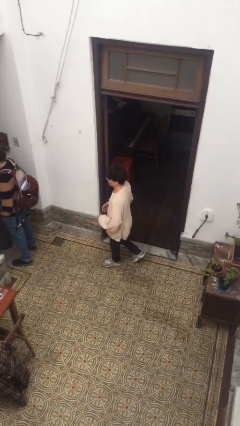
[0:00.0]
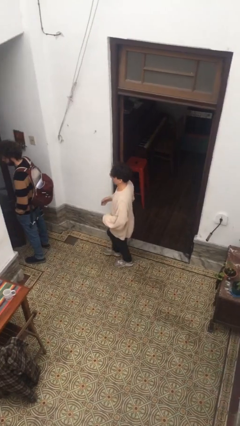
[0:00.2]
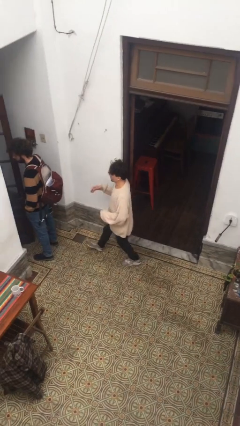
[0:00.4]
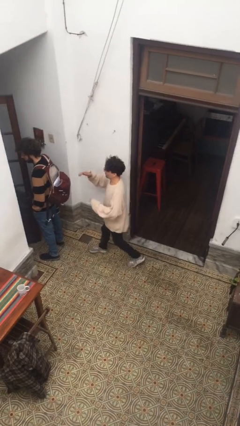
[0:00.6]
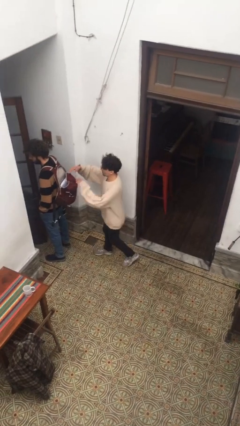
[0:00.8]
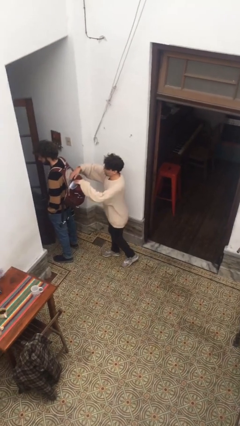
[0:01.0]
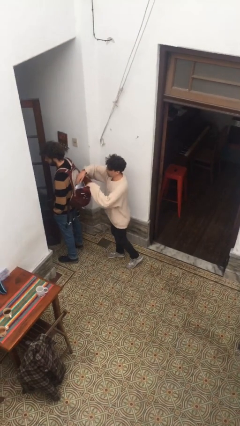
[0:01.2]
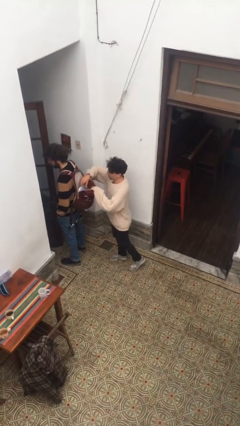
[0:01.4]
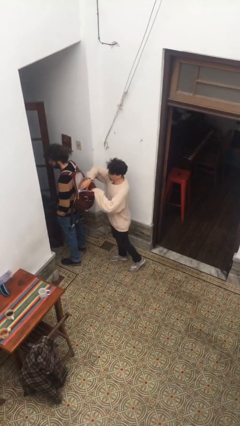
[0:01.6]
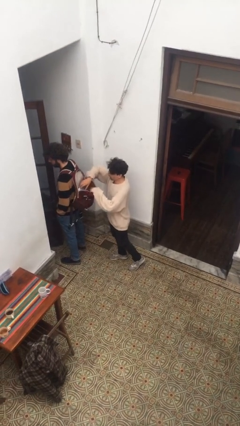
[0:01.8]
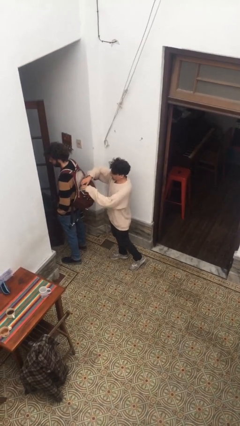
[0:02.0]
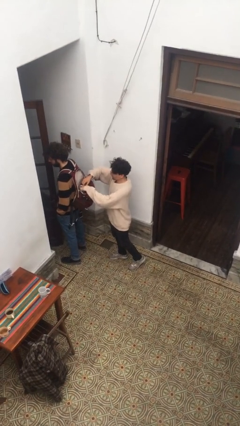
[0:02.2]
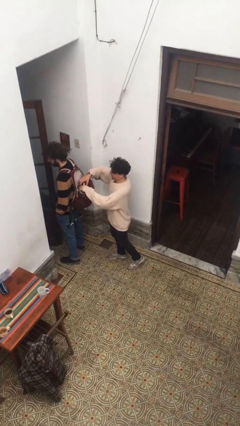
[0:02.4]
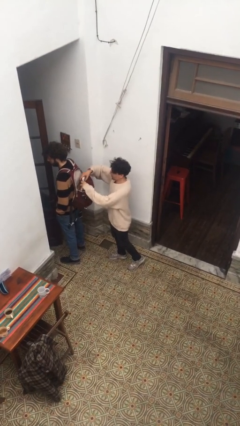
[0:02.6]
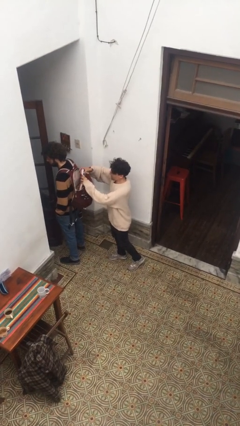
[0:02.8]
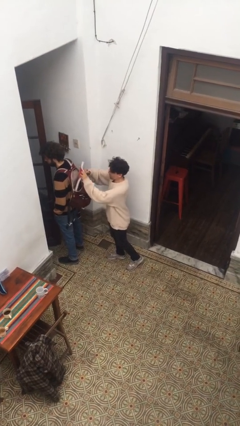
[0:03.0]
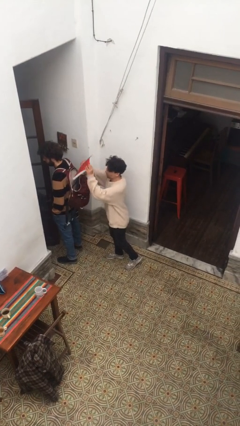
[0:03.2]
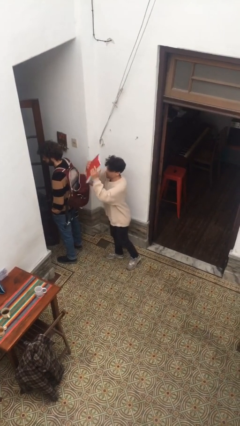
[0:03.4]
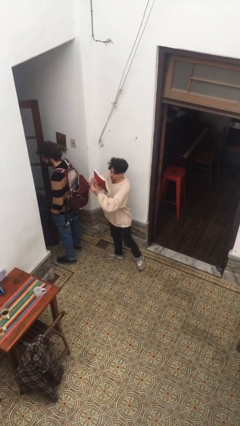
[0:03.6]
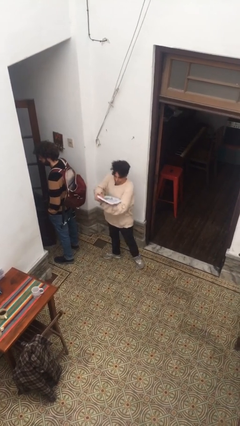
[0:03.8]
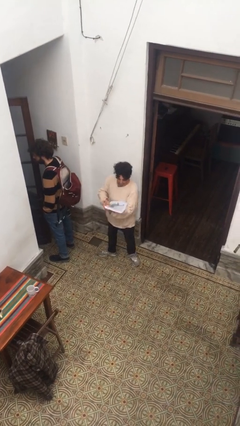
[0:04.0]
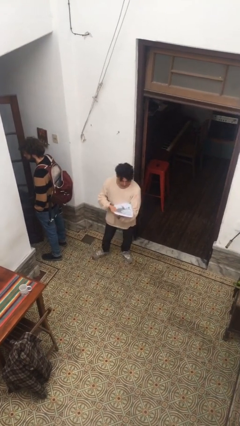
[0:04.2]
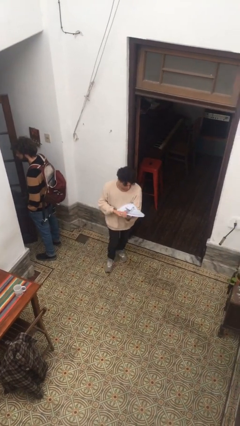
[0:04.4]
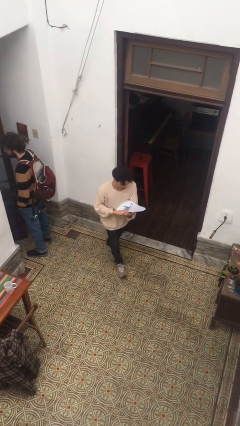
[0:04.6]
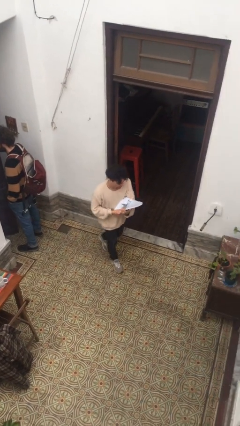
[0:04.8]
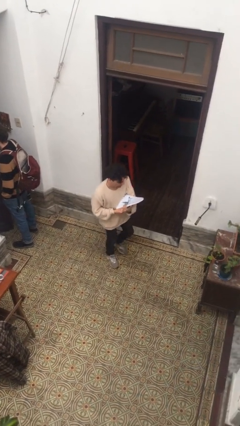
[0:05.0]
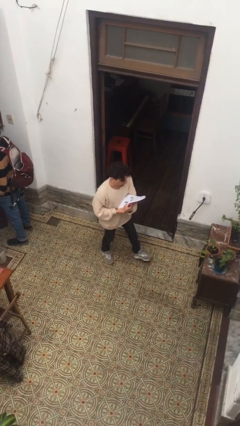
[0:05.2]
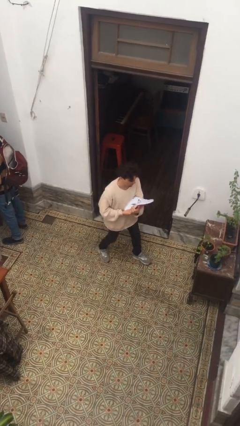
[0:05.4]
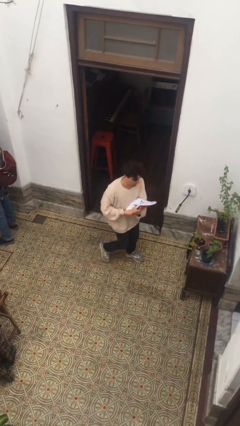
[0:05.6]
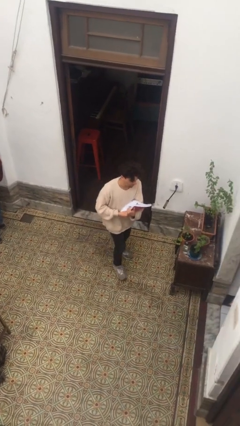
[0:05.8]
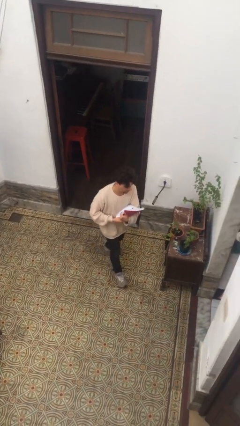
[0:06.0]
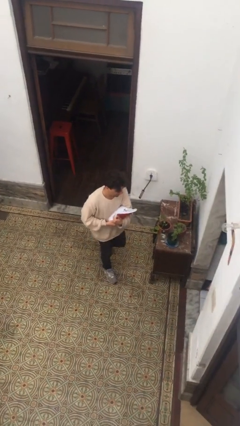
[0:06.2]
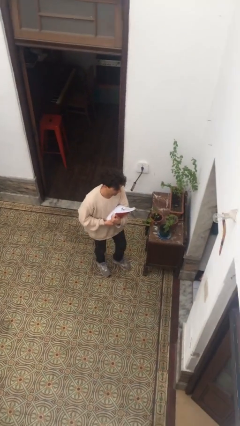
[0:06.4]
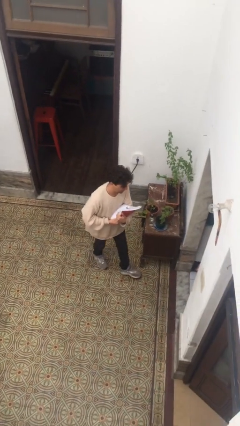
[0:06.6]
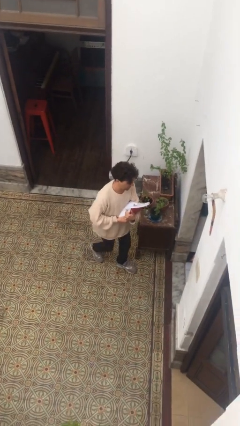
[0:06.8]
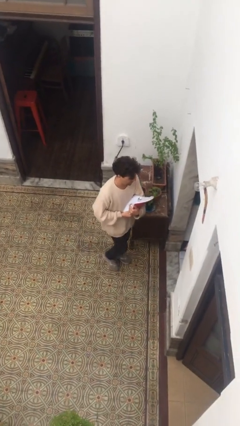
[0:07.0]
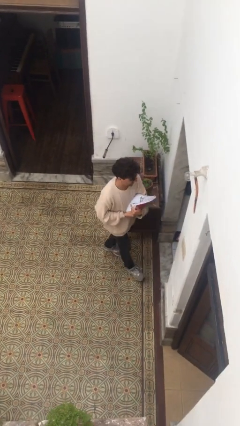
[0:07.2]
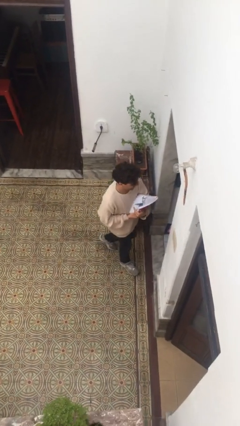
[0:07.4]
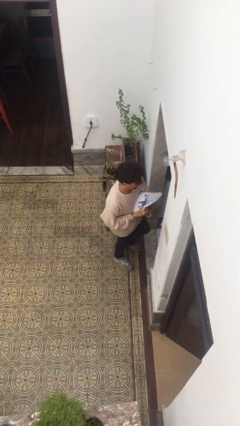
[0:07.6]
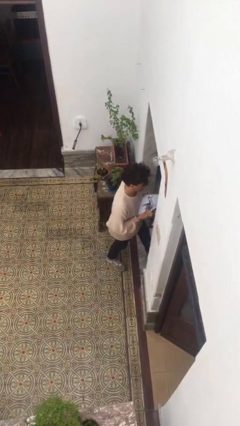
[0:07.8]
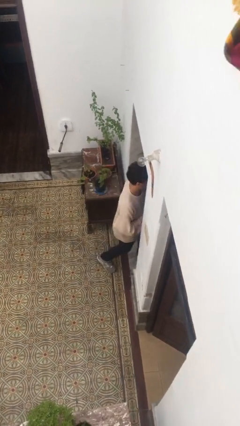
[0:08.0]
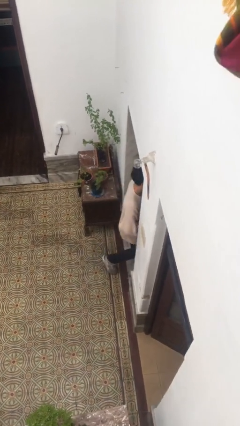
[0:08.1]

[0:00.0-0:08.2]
person steals object from person

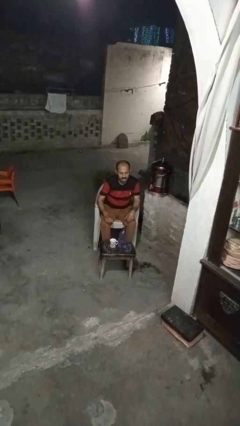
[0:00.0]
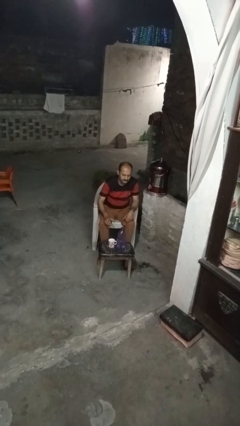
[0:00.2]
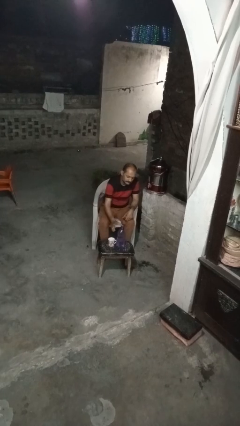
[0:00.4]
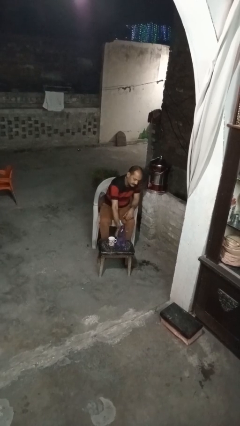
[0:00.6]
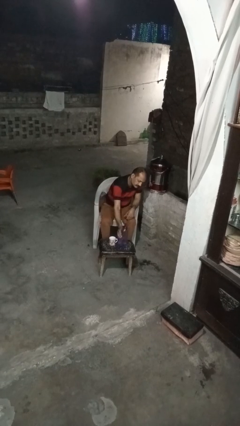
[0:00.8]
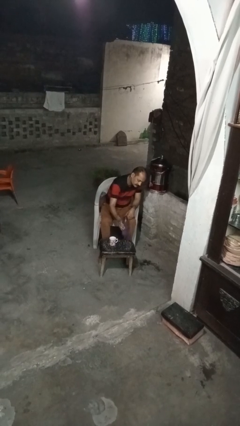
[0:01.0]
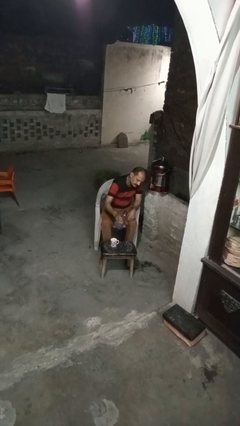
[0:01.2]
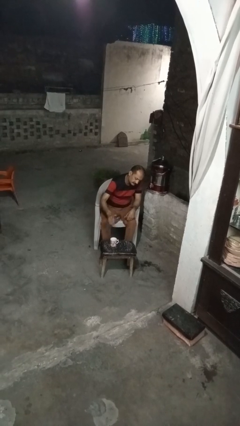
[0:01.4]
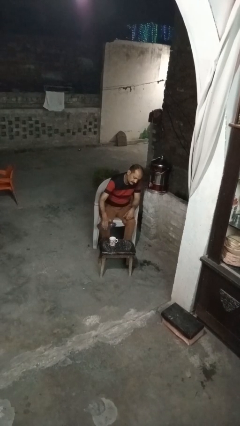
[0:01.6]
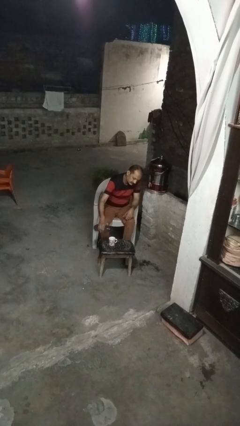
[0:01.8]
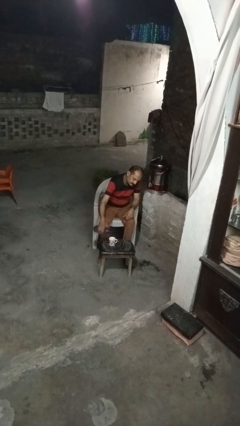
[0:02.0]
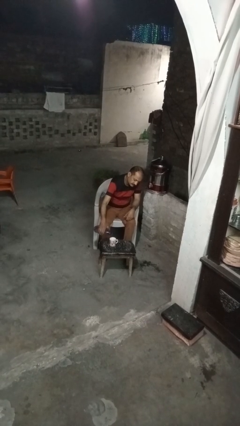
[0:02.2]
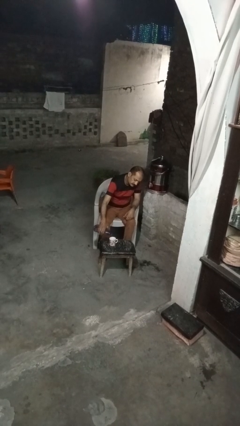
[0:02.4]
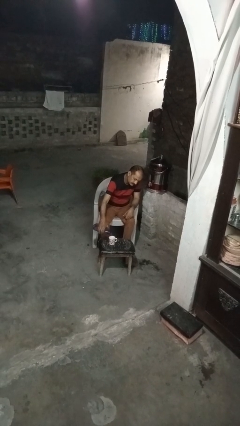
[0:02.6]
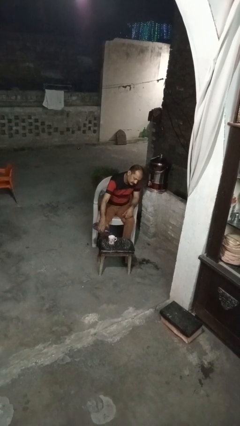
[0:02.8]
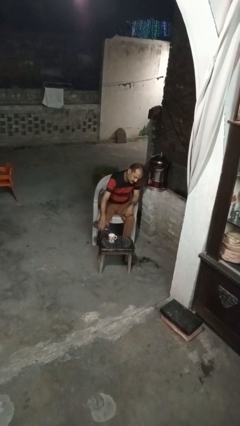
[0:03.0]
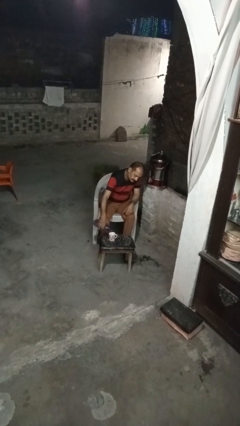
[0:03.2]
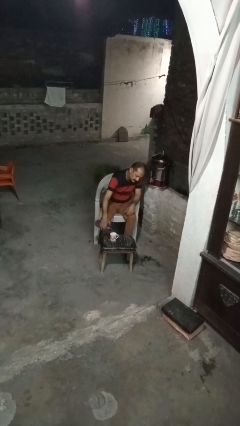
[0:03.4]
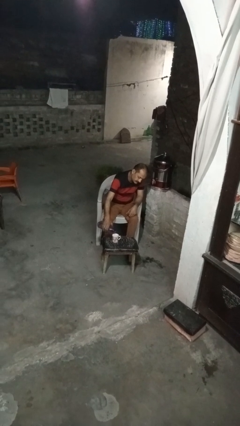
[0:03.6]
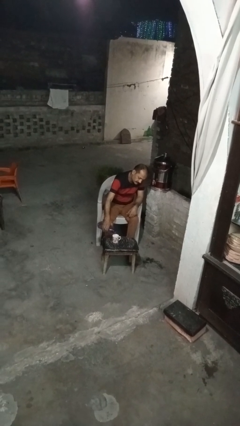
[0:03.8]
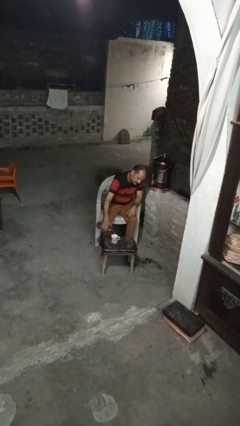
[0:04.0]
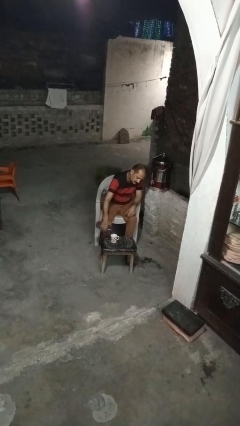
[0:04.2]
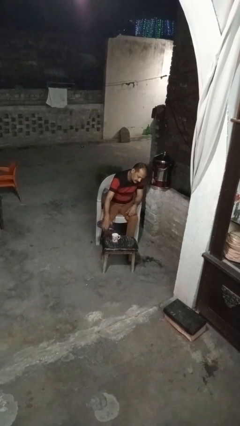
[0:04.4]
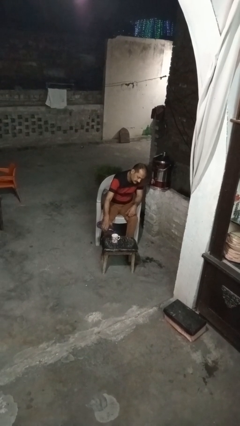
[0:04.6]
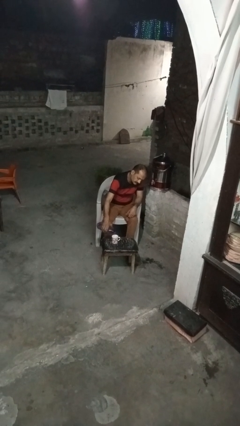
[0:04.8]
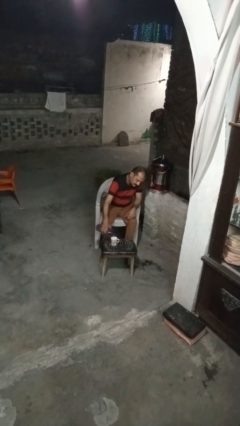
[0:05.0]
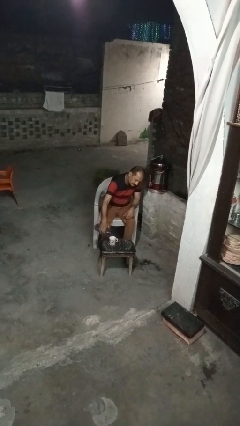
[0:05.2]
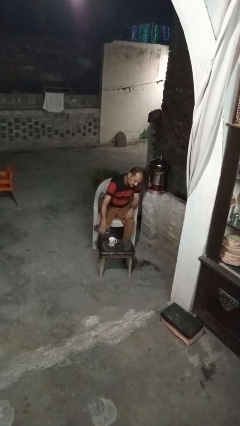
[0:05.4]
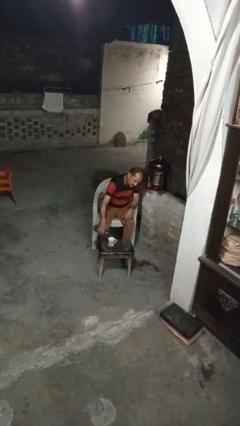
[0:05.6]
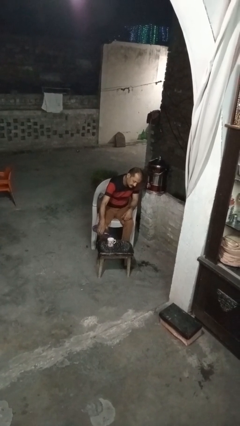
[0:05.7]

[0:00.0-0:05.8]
person pours liquid into cup

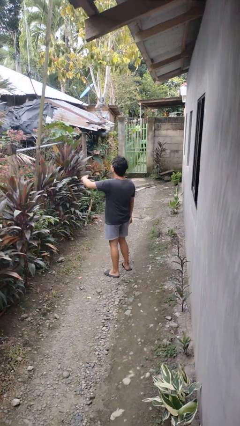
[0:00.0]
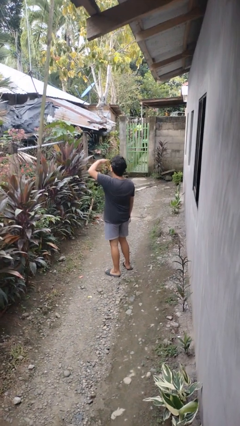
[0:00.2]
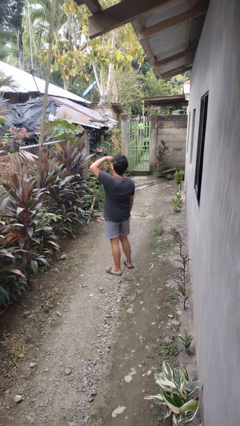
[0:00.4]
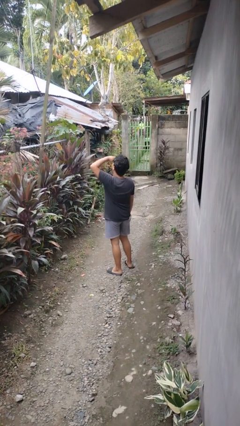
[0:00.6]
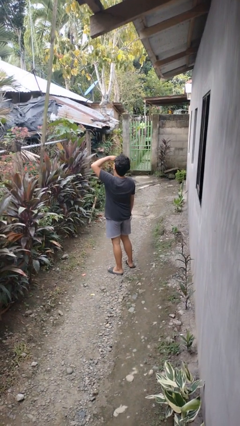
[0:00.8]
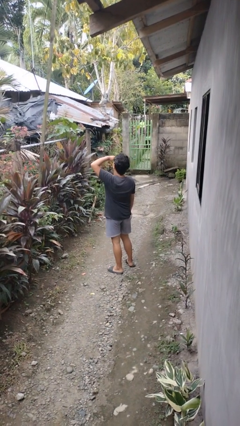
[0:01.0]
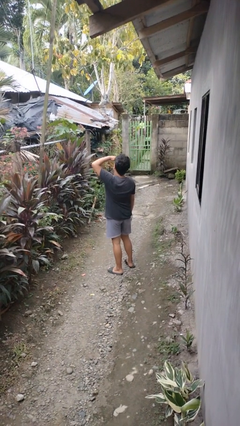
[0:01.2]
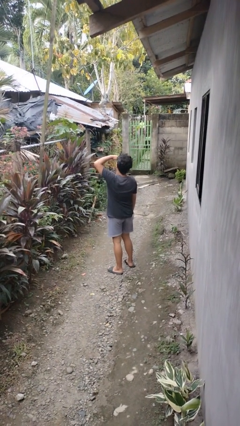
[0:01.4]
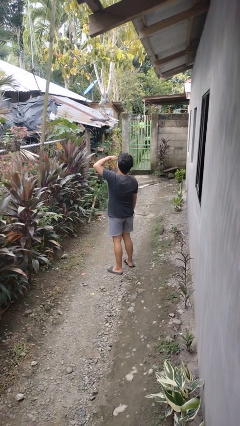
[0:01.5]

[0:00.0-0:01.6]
person shades eyes

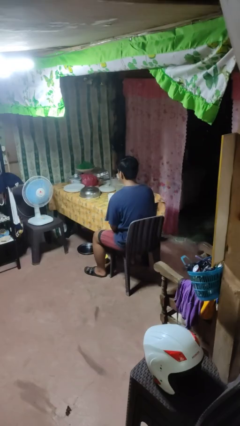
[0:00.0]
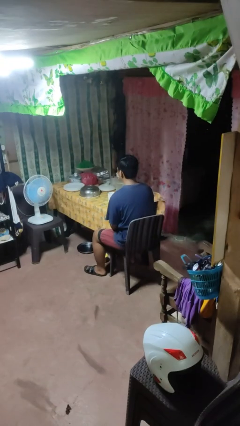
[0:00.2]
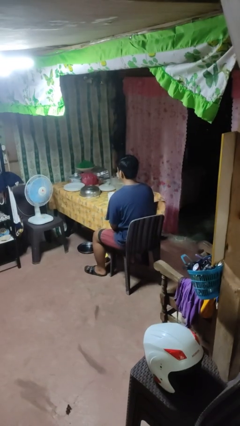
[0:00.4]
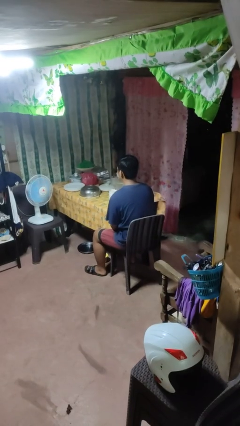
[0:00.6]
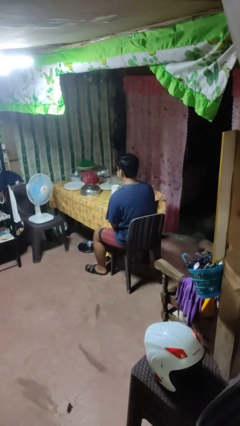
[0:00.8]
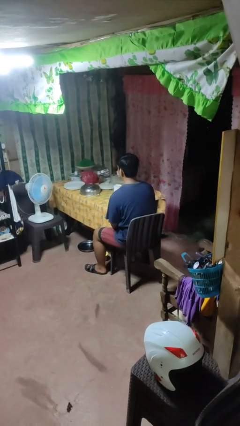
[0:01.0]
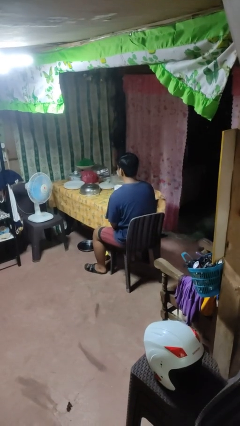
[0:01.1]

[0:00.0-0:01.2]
person picks up object from table

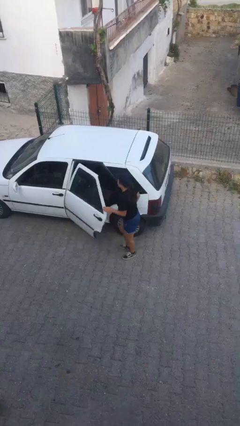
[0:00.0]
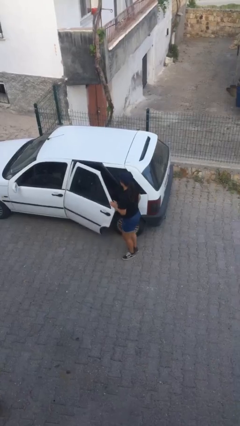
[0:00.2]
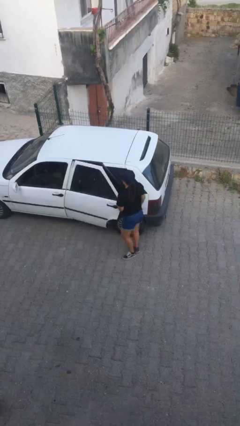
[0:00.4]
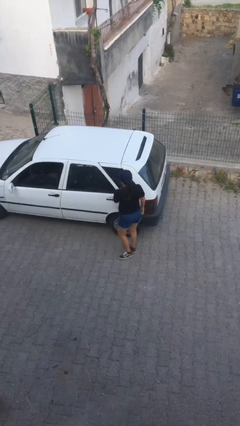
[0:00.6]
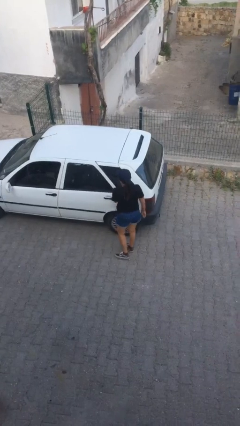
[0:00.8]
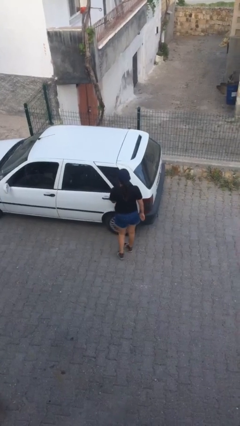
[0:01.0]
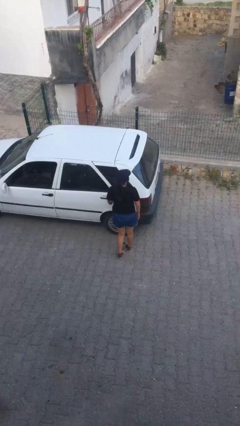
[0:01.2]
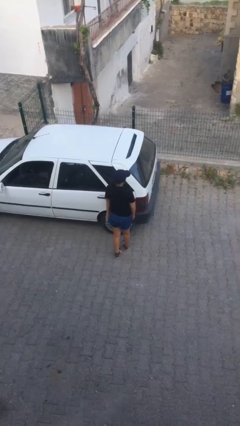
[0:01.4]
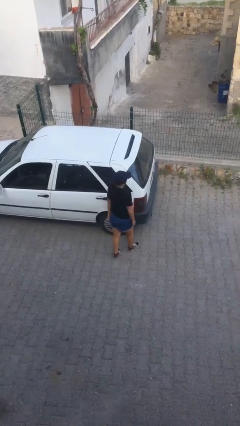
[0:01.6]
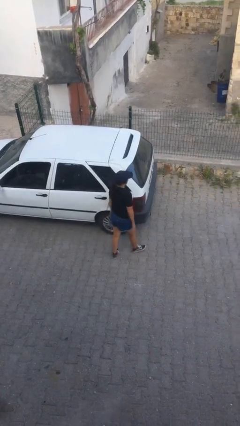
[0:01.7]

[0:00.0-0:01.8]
person closes car door
